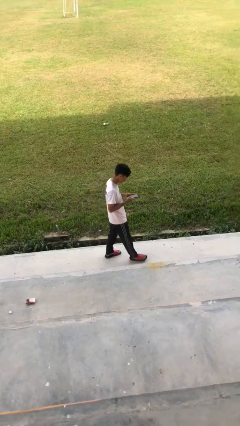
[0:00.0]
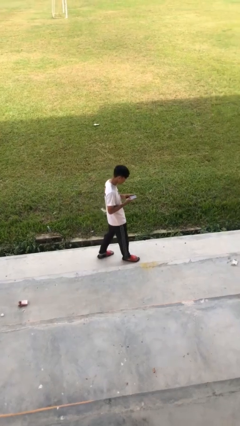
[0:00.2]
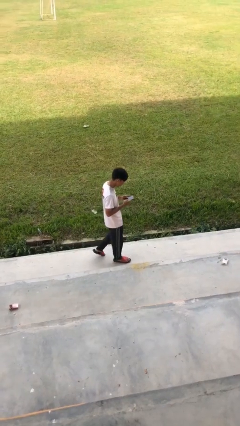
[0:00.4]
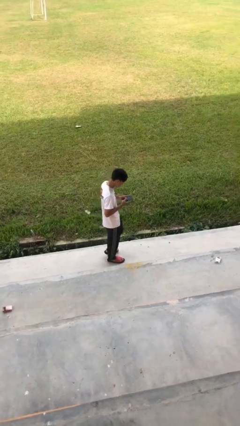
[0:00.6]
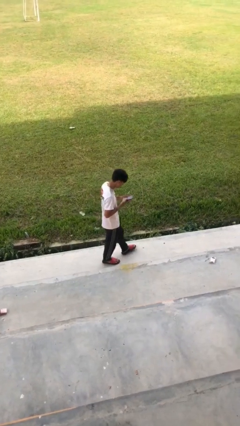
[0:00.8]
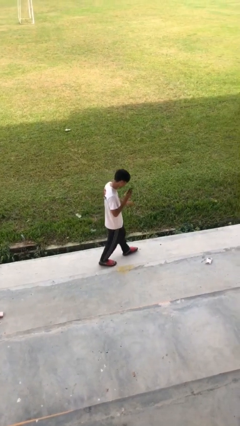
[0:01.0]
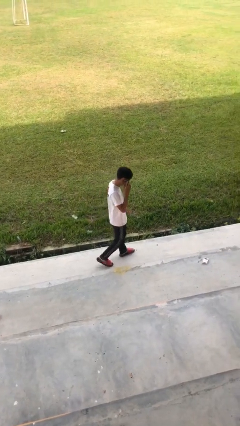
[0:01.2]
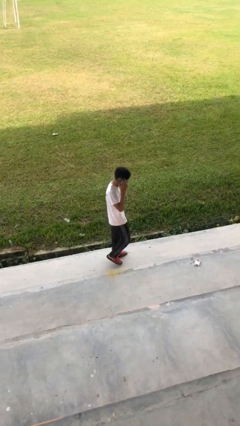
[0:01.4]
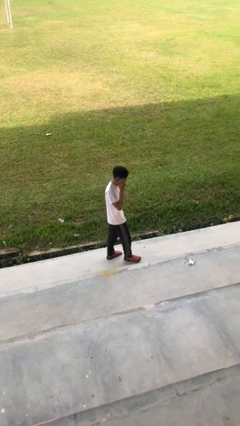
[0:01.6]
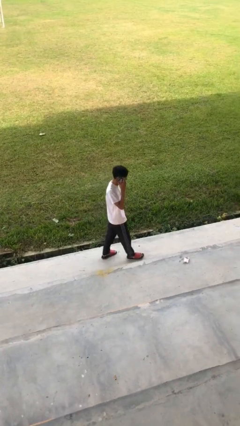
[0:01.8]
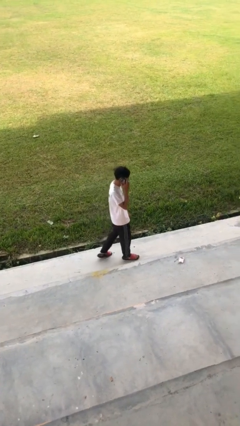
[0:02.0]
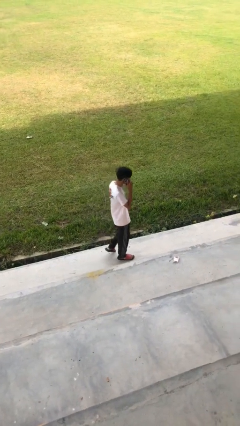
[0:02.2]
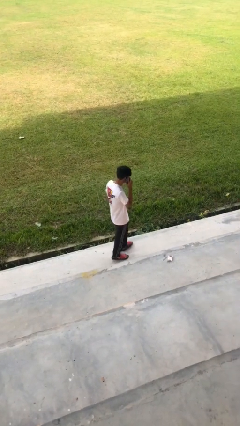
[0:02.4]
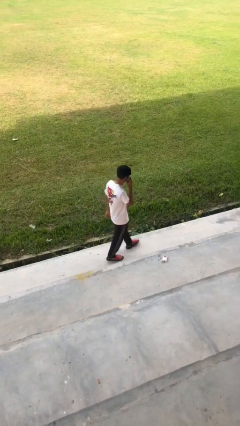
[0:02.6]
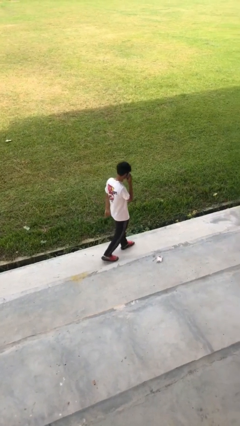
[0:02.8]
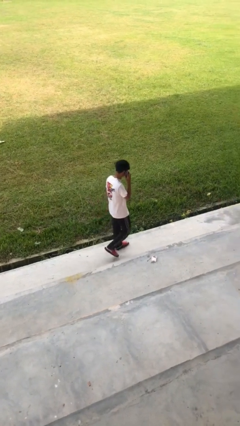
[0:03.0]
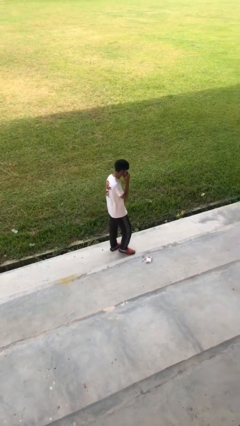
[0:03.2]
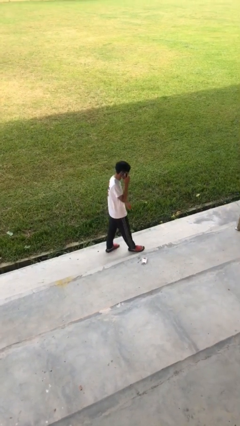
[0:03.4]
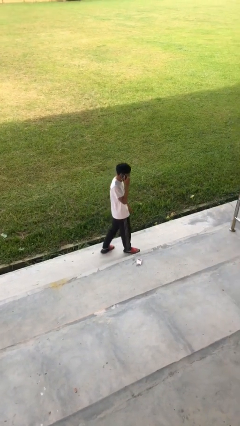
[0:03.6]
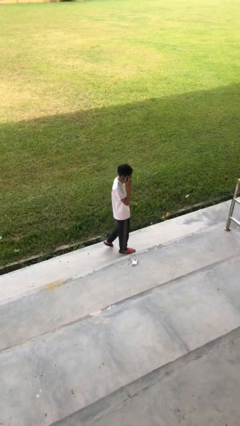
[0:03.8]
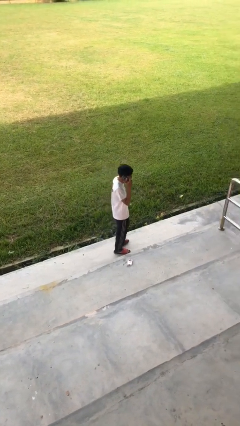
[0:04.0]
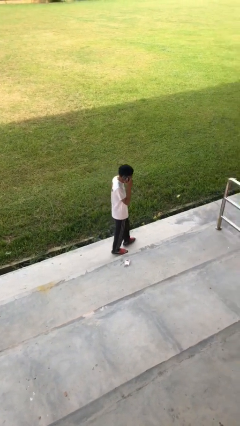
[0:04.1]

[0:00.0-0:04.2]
person talks on phone

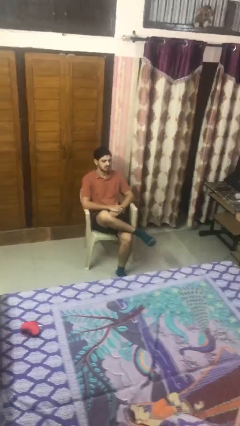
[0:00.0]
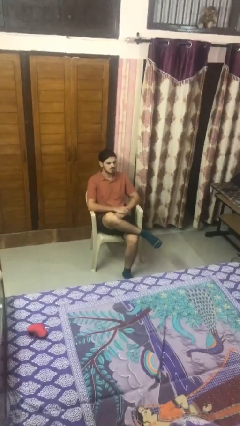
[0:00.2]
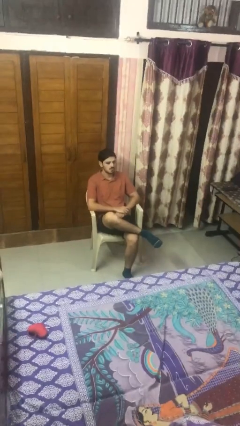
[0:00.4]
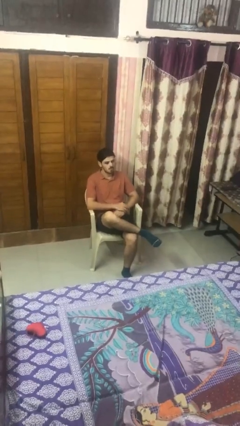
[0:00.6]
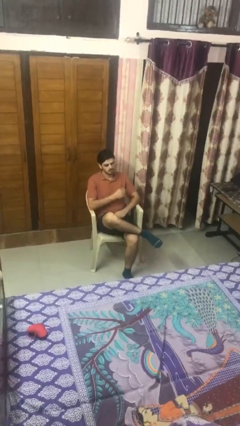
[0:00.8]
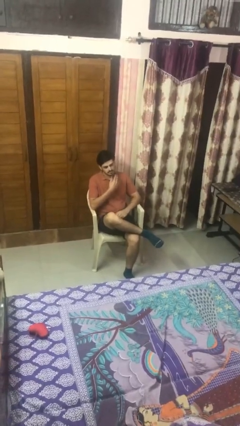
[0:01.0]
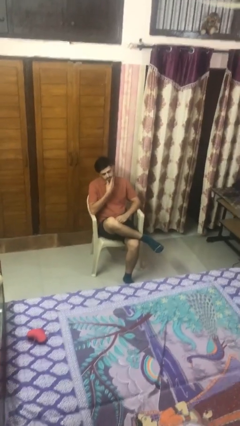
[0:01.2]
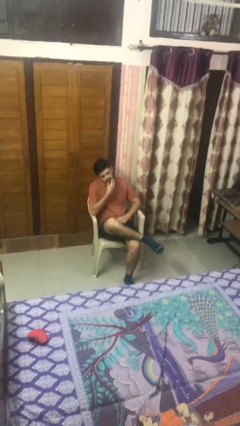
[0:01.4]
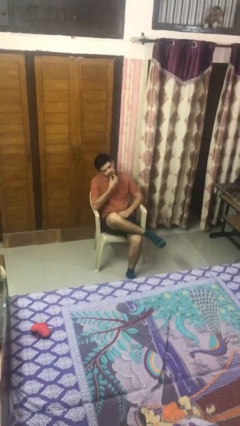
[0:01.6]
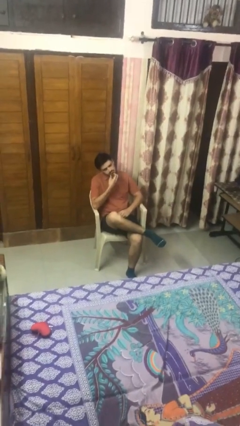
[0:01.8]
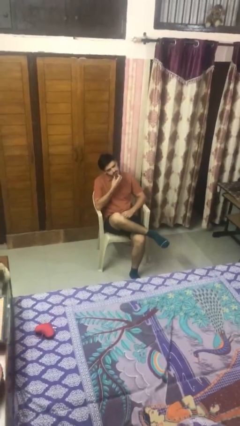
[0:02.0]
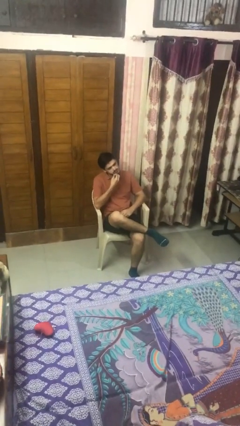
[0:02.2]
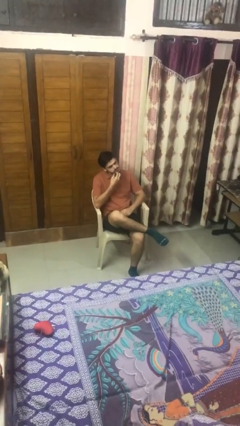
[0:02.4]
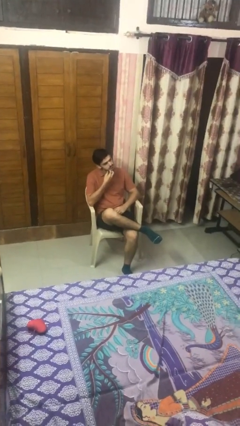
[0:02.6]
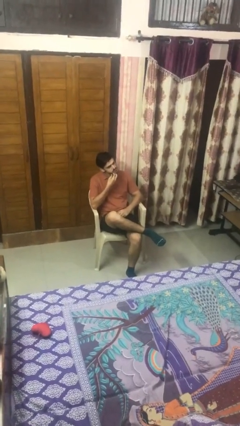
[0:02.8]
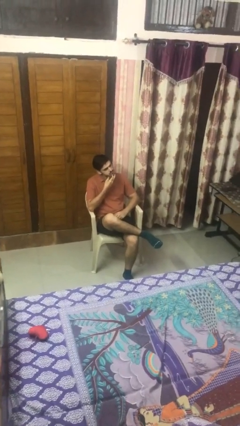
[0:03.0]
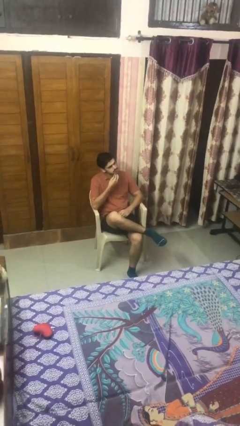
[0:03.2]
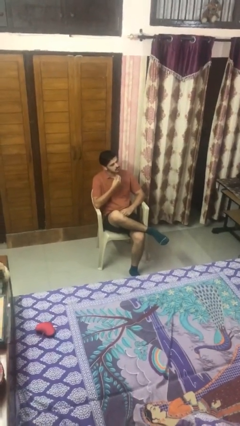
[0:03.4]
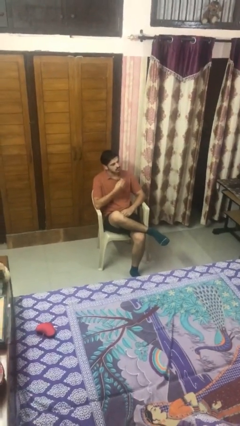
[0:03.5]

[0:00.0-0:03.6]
person strokes chin

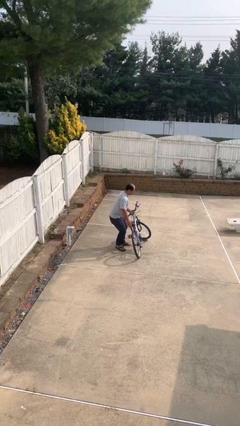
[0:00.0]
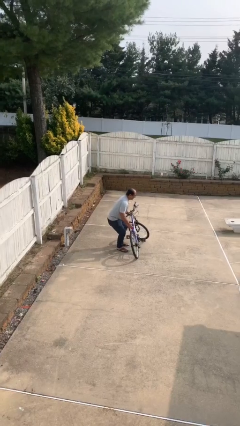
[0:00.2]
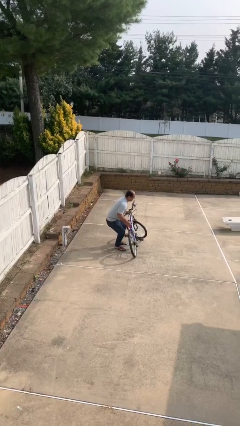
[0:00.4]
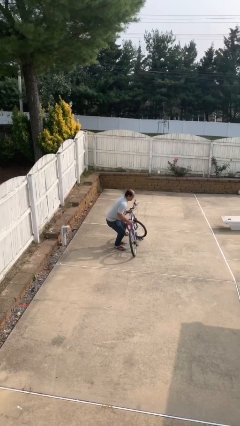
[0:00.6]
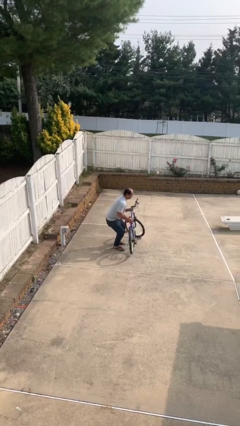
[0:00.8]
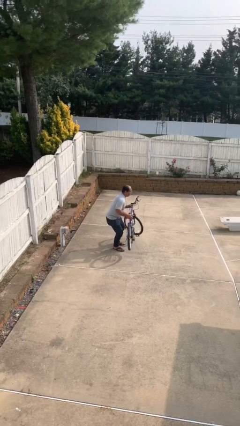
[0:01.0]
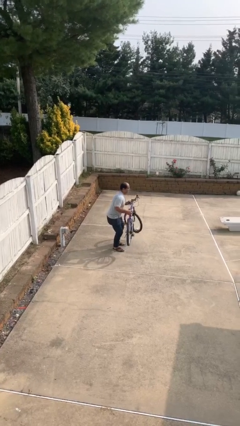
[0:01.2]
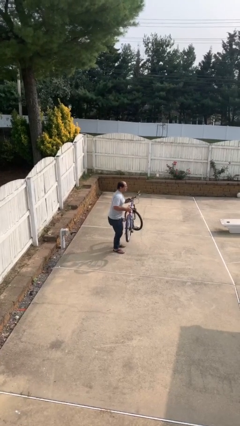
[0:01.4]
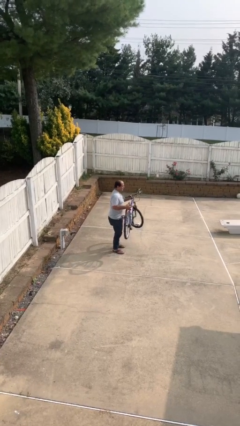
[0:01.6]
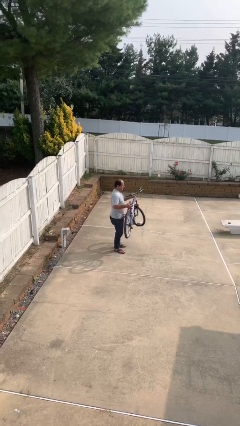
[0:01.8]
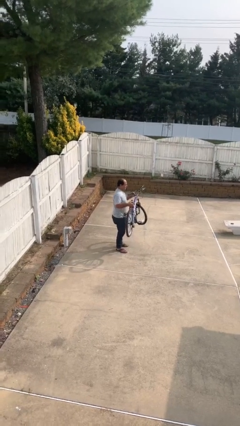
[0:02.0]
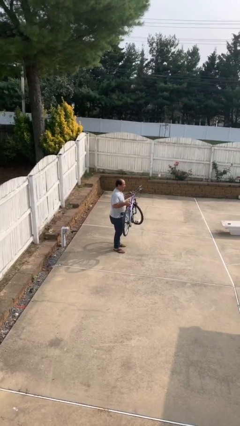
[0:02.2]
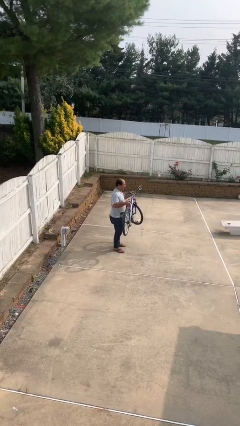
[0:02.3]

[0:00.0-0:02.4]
person picks up object from floor

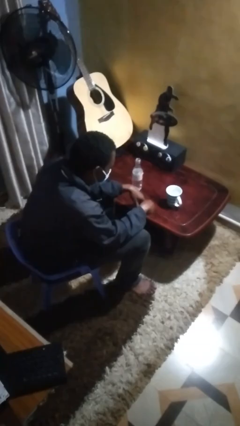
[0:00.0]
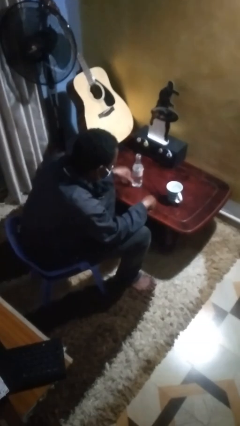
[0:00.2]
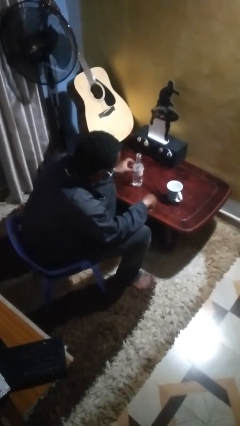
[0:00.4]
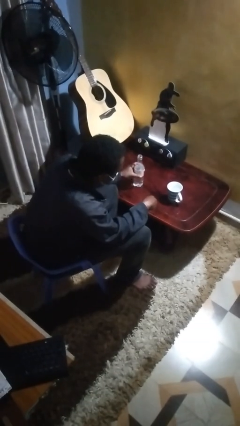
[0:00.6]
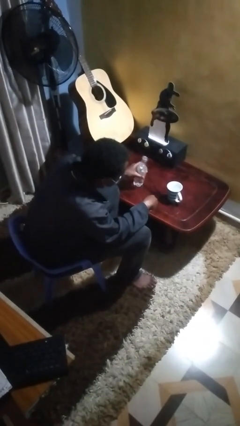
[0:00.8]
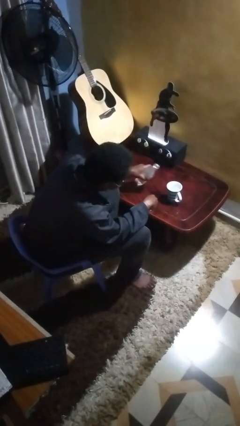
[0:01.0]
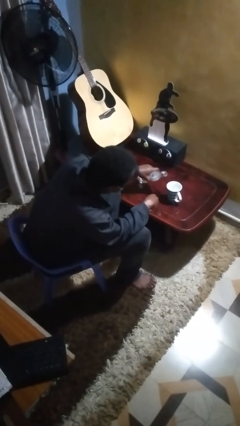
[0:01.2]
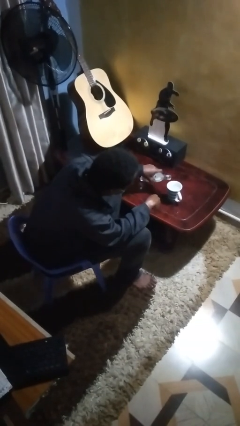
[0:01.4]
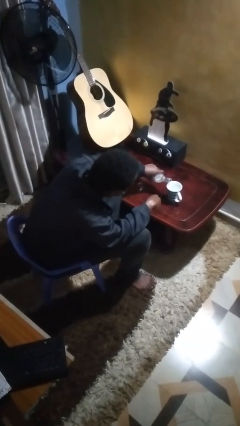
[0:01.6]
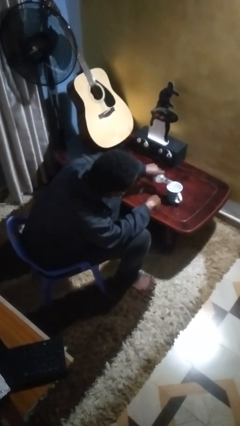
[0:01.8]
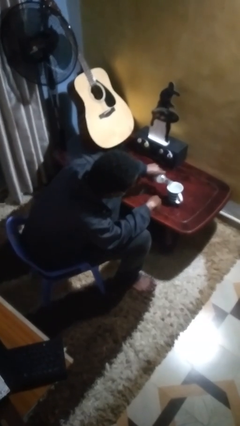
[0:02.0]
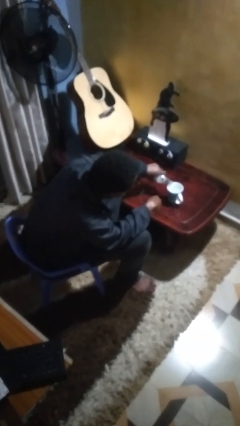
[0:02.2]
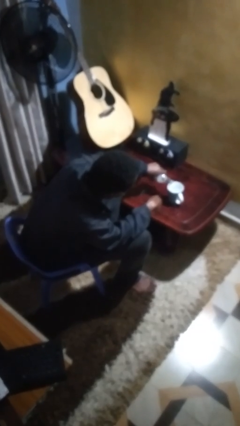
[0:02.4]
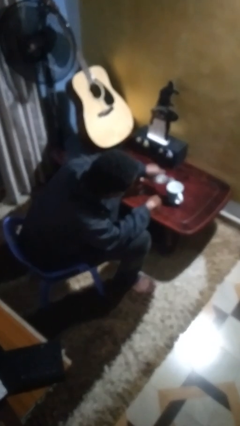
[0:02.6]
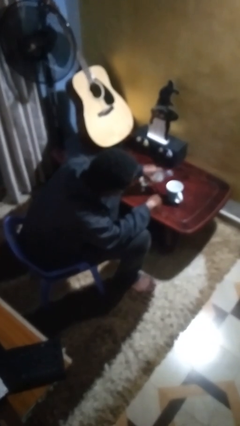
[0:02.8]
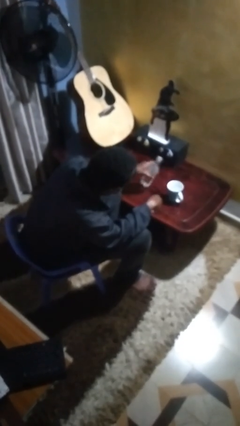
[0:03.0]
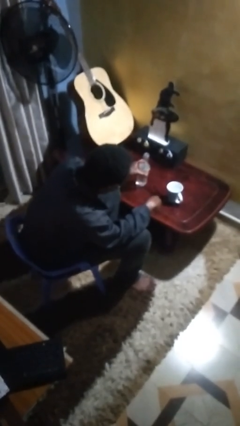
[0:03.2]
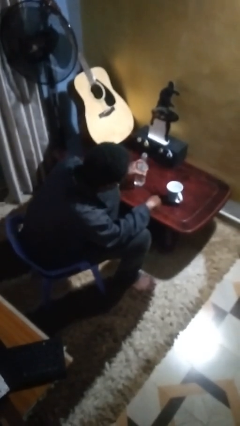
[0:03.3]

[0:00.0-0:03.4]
person pours liquid into cup

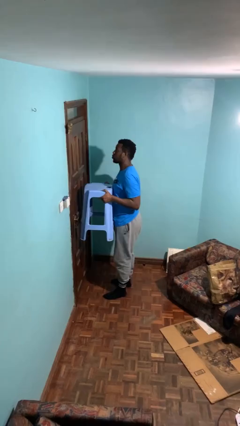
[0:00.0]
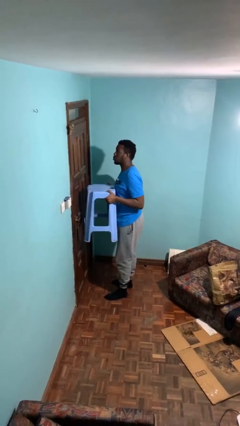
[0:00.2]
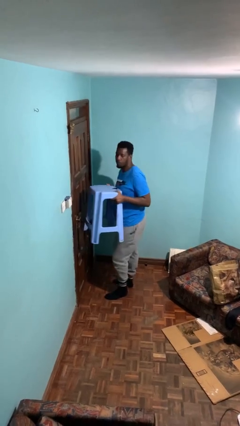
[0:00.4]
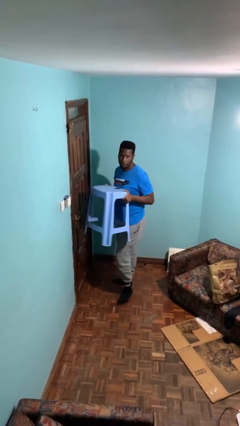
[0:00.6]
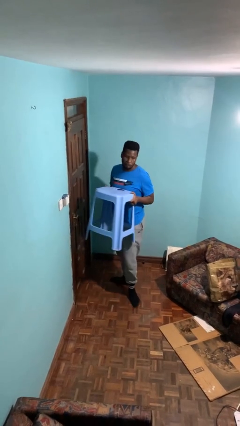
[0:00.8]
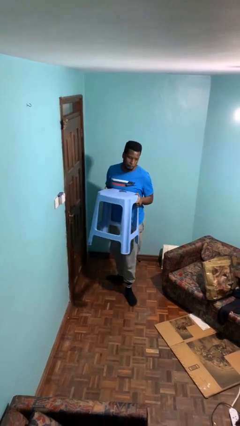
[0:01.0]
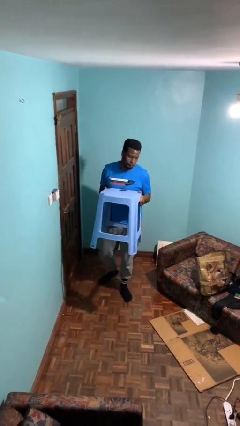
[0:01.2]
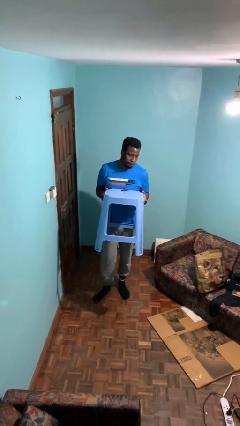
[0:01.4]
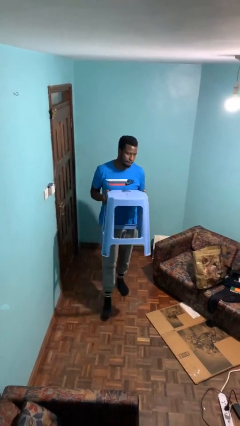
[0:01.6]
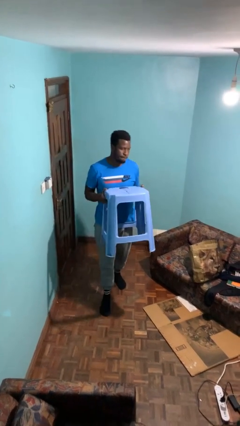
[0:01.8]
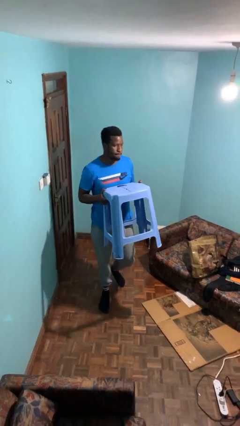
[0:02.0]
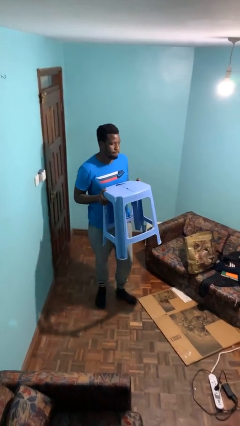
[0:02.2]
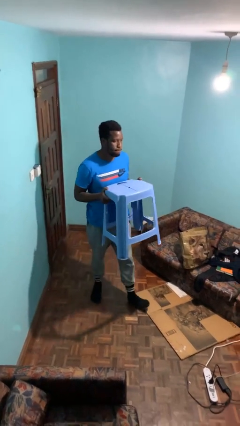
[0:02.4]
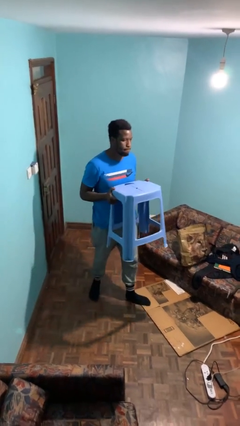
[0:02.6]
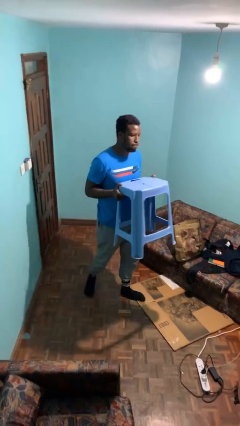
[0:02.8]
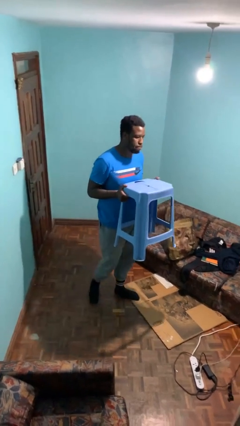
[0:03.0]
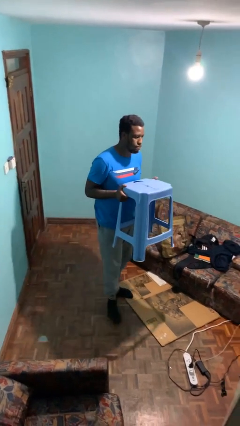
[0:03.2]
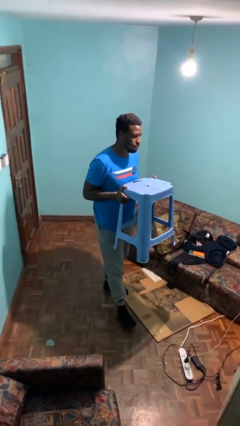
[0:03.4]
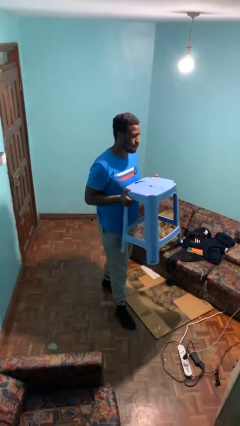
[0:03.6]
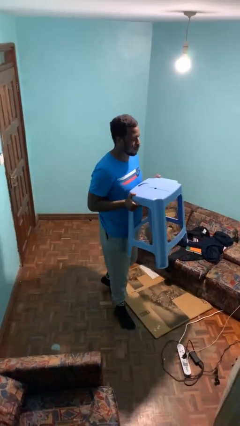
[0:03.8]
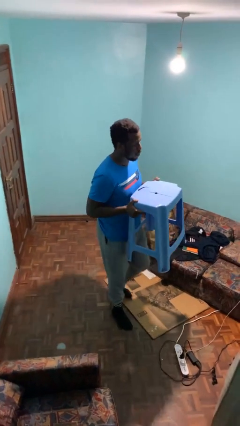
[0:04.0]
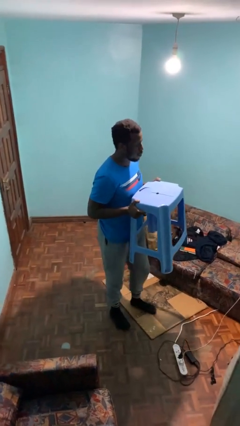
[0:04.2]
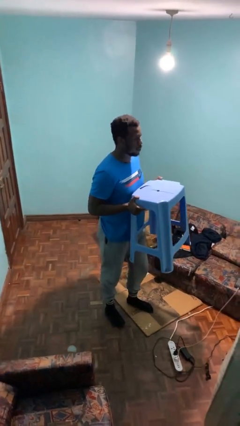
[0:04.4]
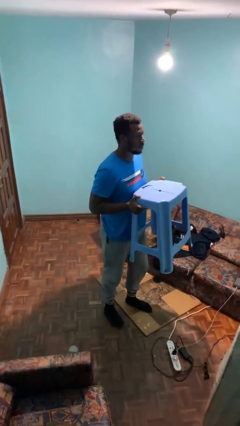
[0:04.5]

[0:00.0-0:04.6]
person carries furniture
